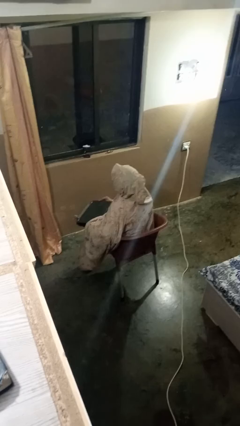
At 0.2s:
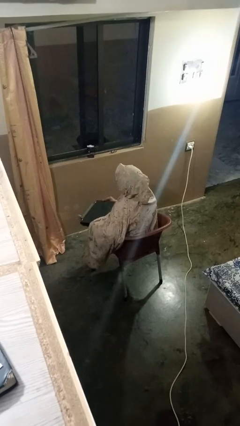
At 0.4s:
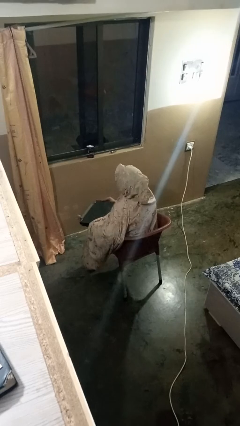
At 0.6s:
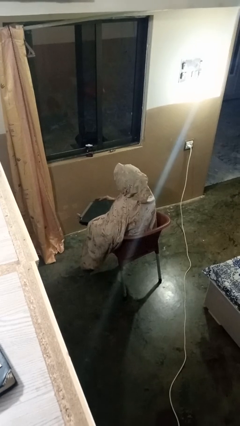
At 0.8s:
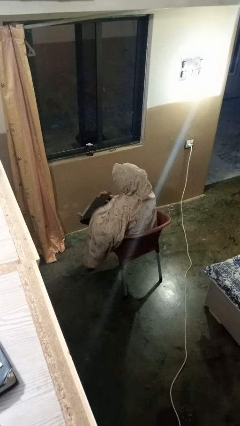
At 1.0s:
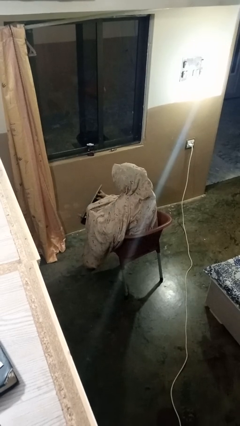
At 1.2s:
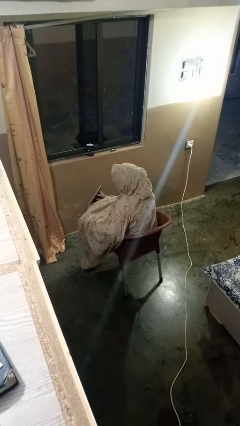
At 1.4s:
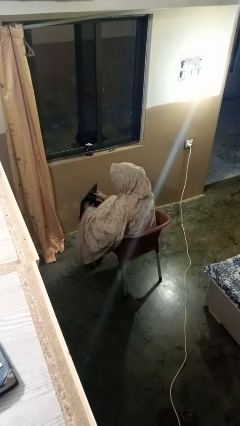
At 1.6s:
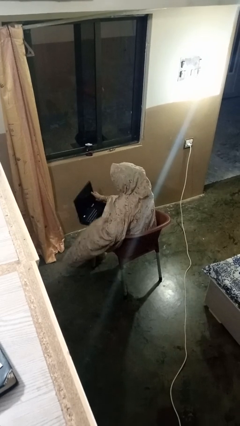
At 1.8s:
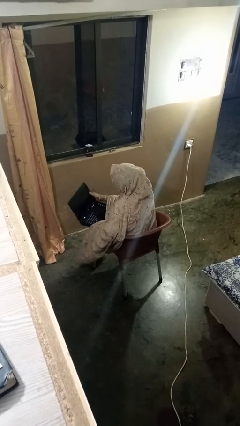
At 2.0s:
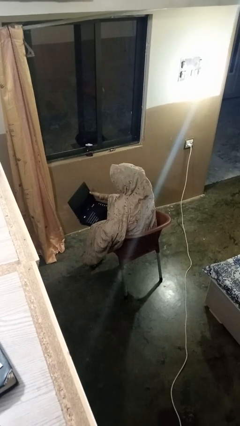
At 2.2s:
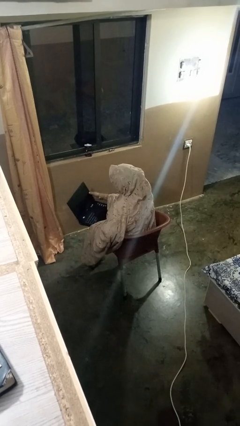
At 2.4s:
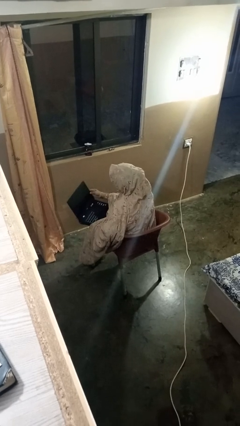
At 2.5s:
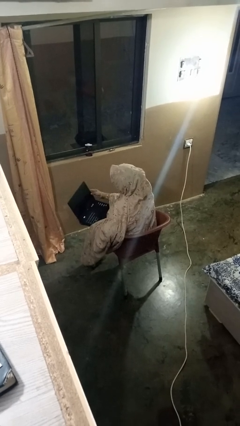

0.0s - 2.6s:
person opens laptop

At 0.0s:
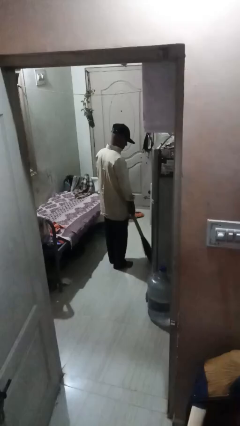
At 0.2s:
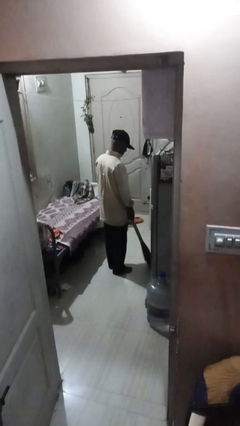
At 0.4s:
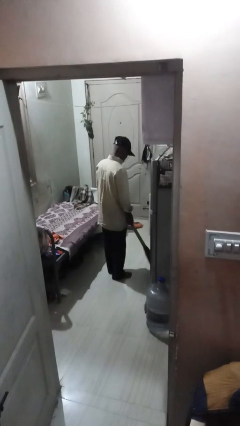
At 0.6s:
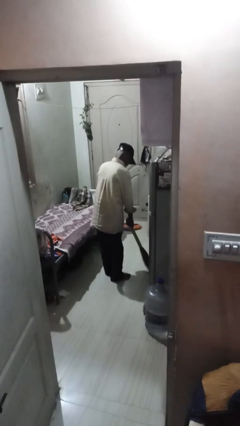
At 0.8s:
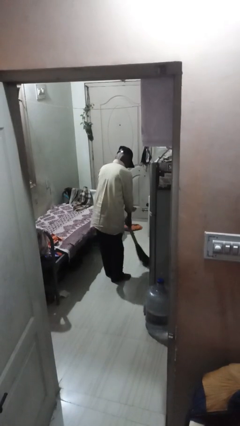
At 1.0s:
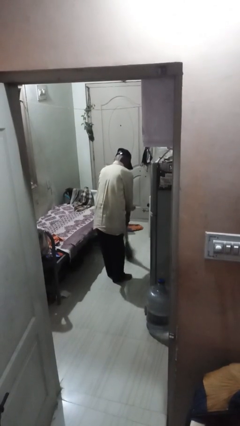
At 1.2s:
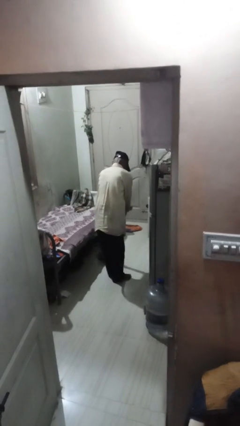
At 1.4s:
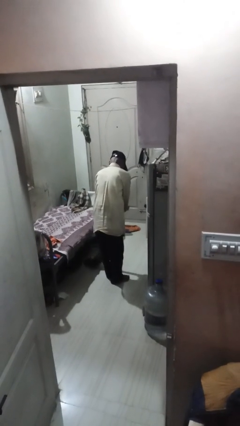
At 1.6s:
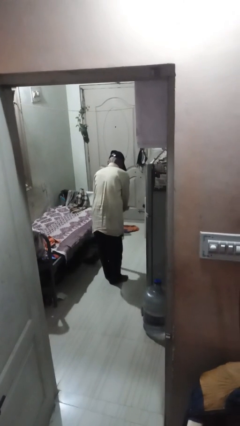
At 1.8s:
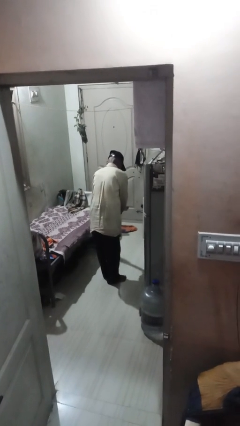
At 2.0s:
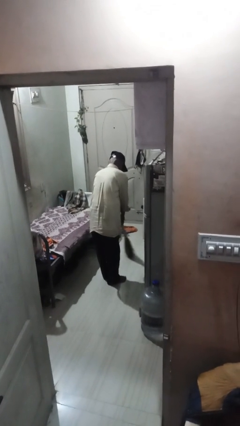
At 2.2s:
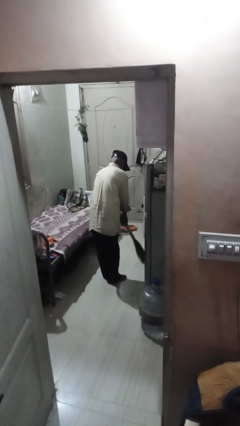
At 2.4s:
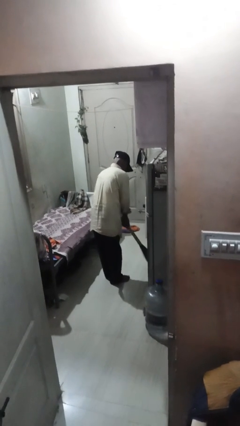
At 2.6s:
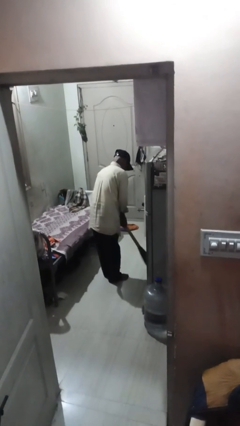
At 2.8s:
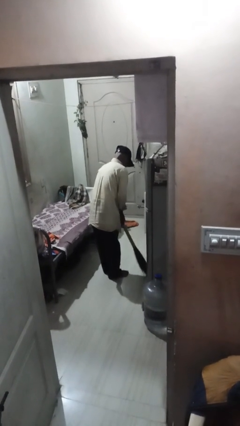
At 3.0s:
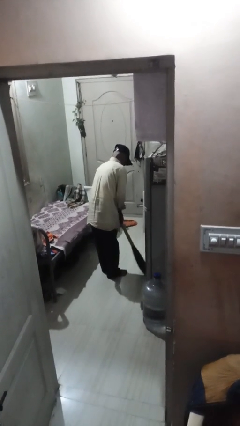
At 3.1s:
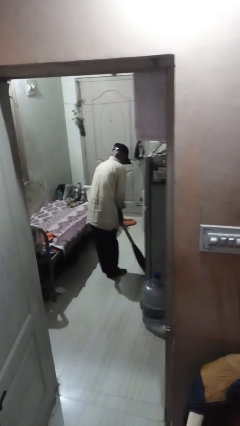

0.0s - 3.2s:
person sweeps floor

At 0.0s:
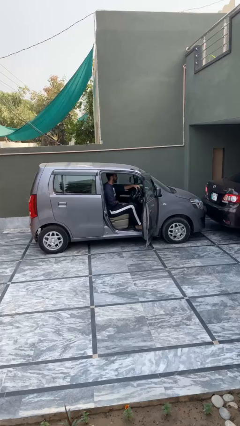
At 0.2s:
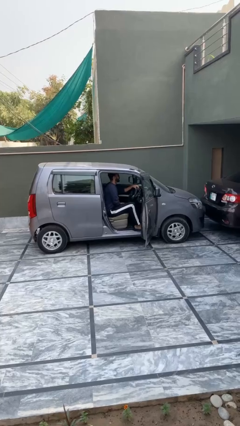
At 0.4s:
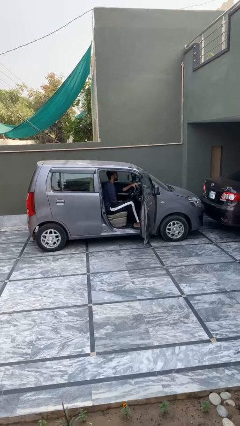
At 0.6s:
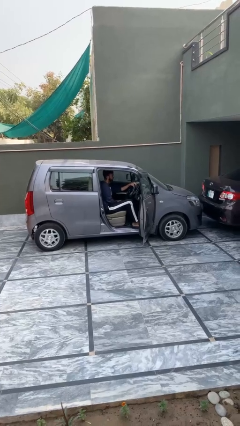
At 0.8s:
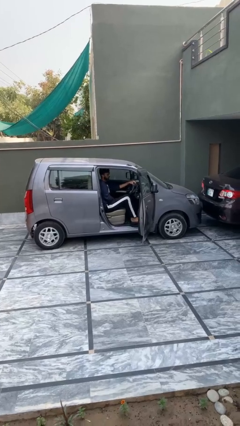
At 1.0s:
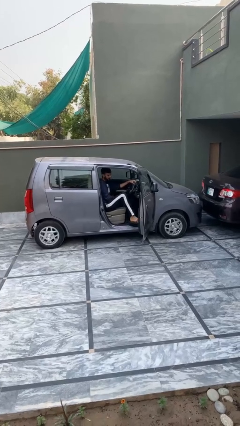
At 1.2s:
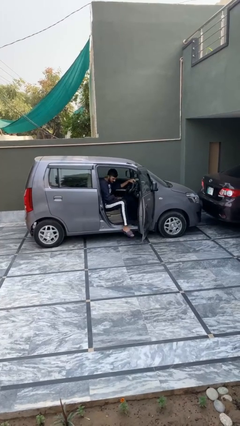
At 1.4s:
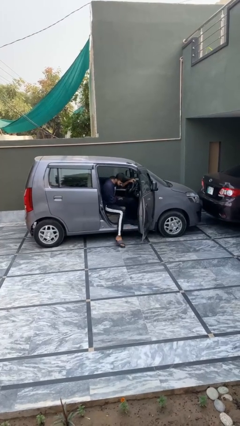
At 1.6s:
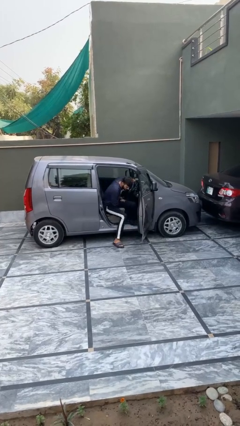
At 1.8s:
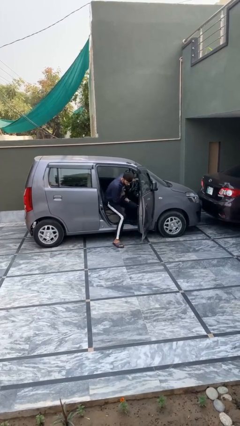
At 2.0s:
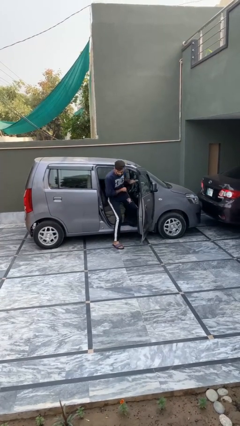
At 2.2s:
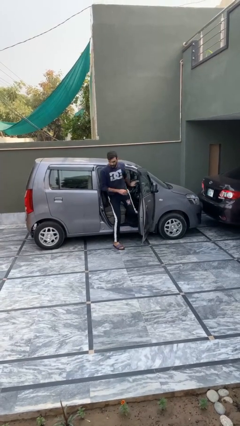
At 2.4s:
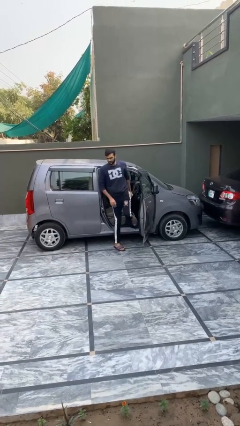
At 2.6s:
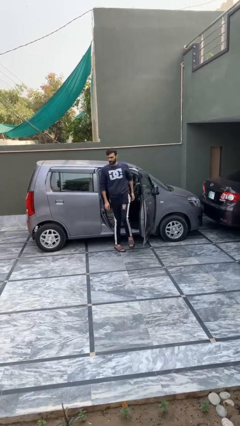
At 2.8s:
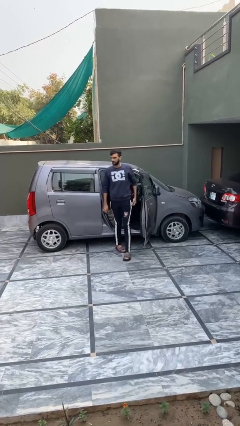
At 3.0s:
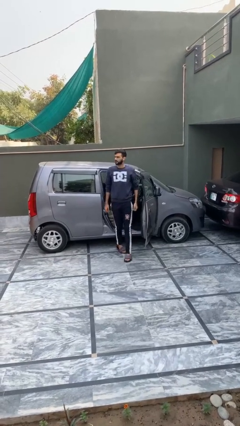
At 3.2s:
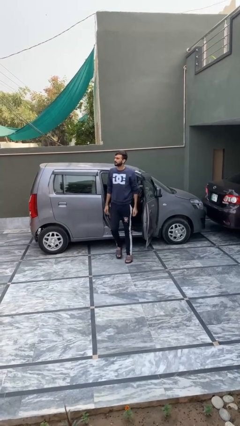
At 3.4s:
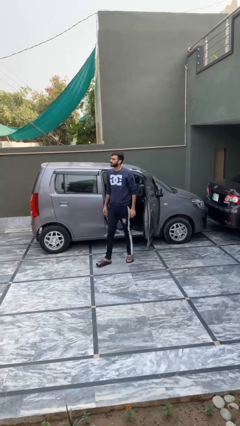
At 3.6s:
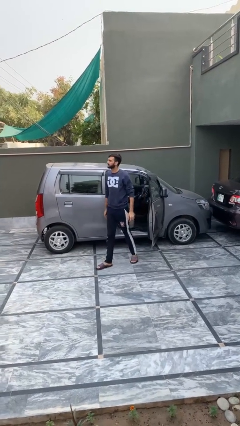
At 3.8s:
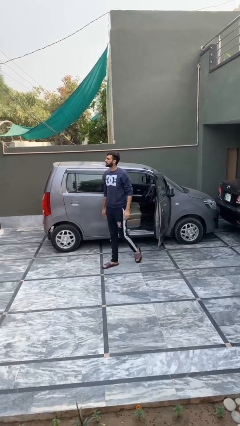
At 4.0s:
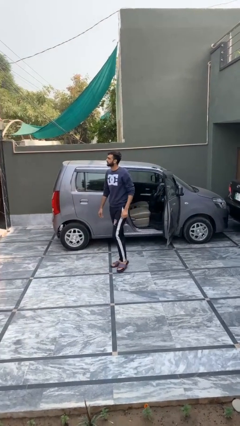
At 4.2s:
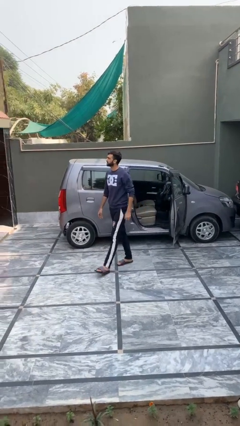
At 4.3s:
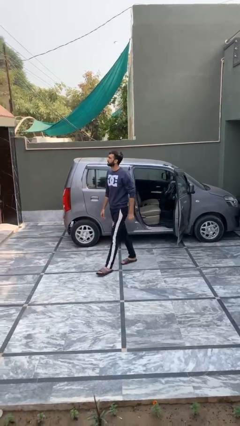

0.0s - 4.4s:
person exits car

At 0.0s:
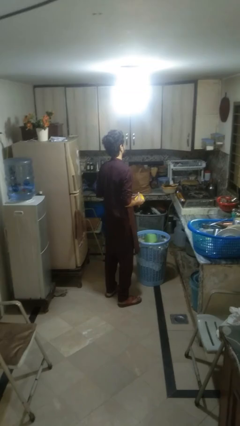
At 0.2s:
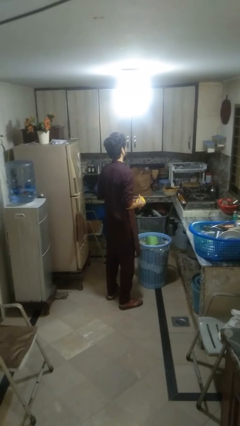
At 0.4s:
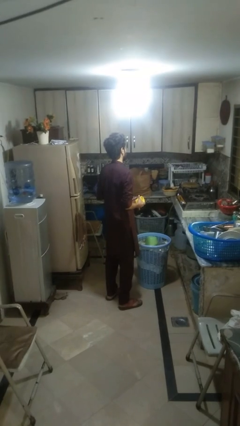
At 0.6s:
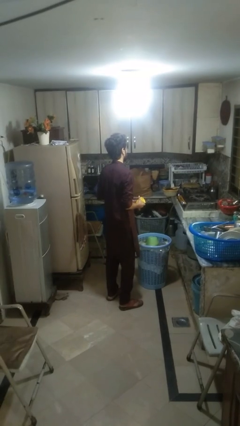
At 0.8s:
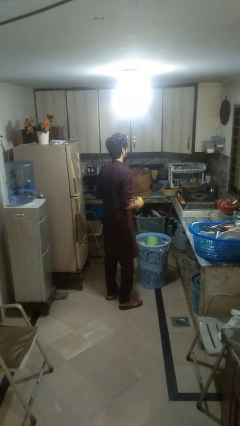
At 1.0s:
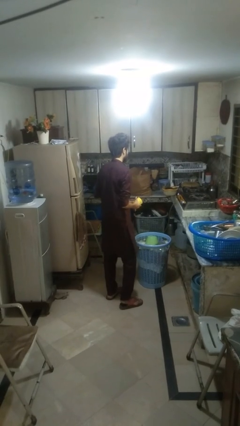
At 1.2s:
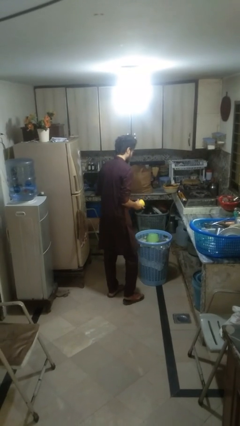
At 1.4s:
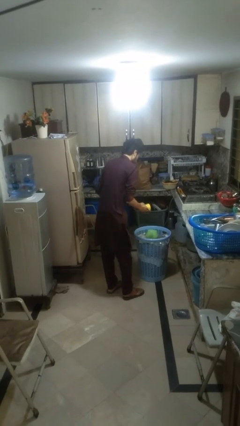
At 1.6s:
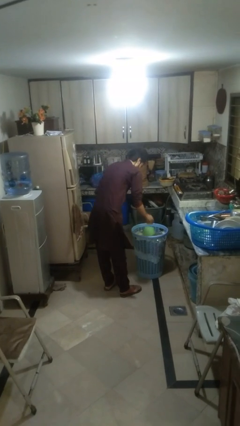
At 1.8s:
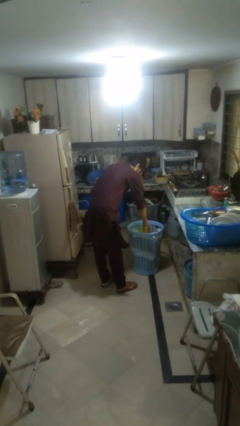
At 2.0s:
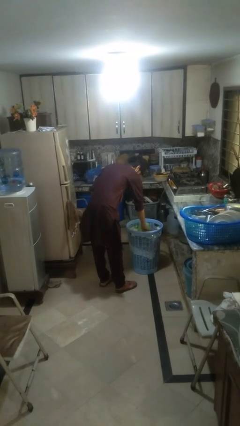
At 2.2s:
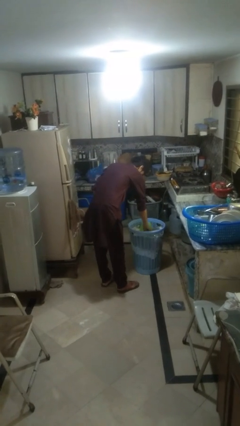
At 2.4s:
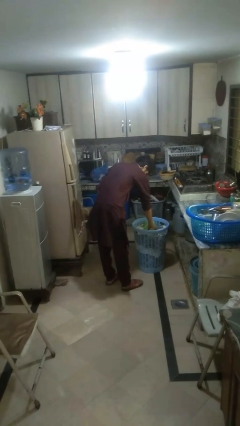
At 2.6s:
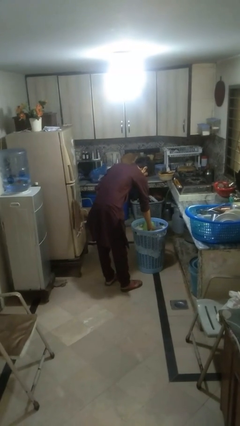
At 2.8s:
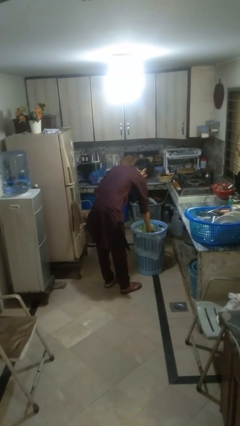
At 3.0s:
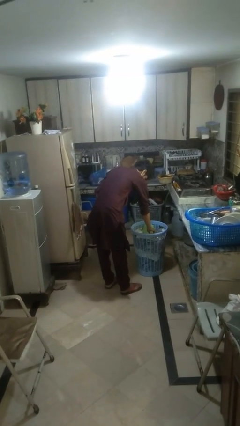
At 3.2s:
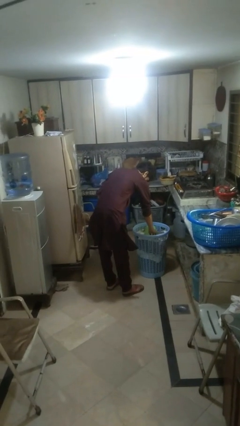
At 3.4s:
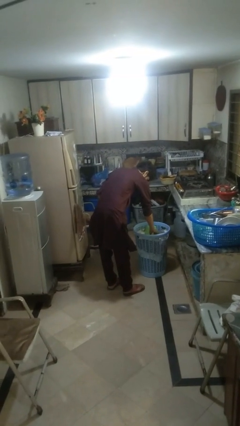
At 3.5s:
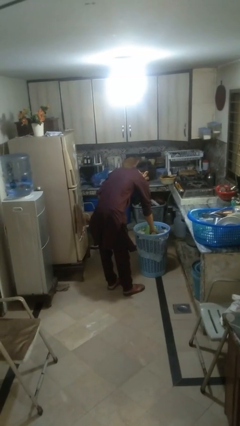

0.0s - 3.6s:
person puts object into basket

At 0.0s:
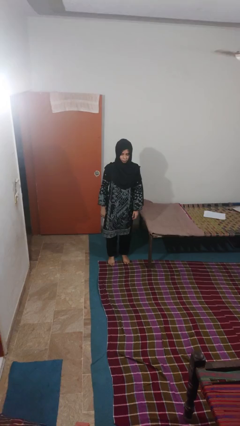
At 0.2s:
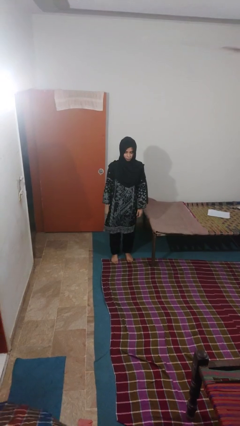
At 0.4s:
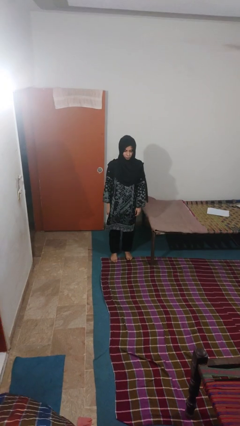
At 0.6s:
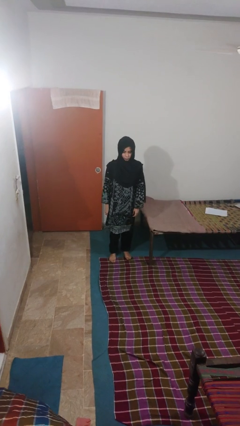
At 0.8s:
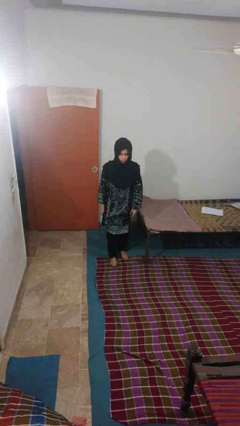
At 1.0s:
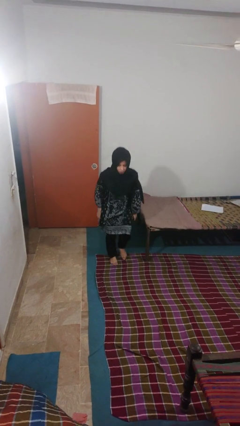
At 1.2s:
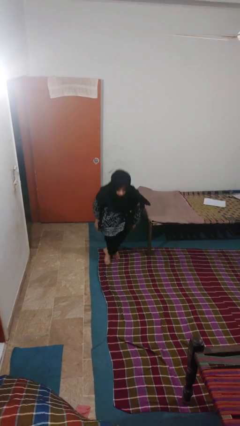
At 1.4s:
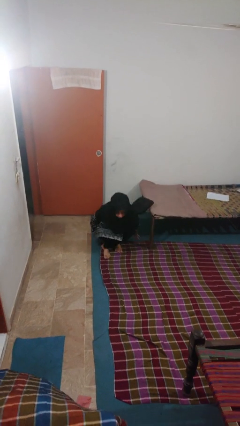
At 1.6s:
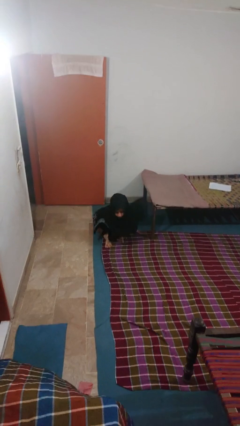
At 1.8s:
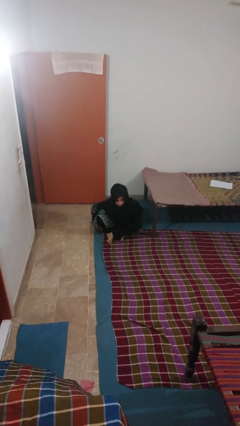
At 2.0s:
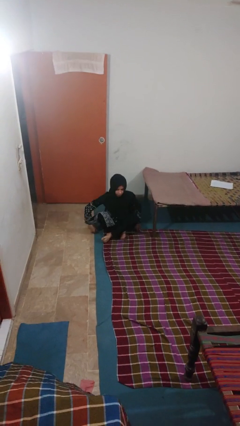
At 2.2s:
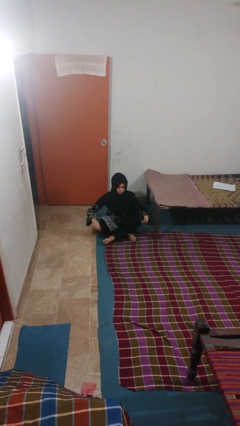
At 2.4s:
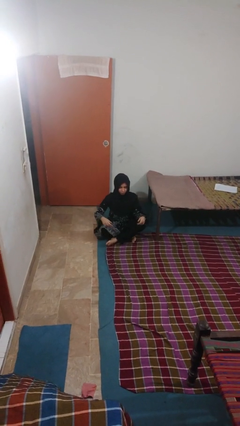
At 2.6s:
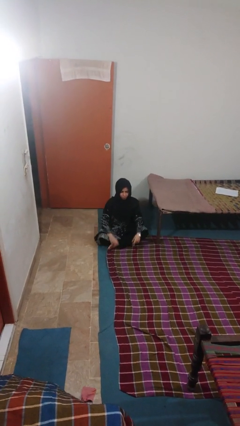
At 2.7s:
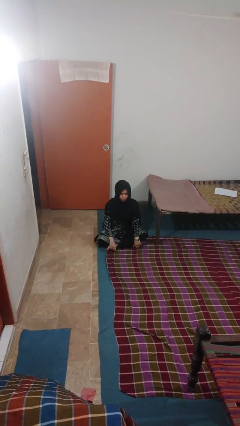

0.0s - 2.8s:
person sits crisscross

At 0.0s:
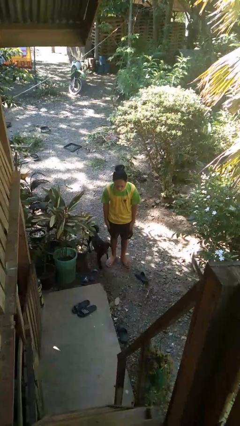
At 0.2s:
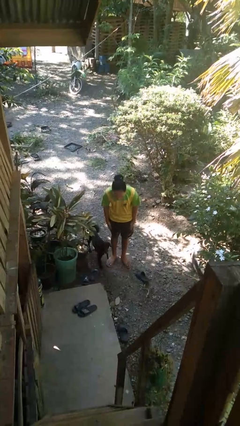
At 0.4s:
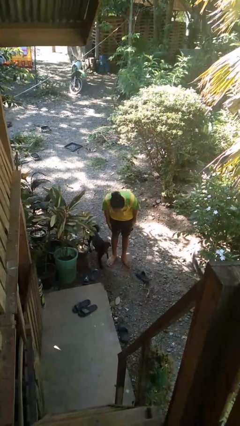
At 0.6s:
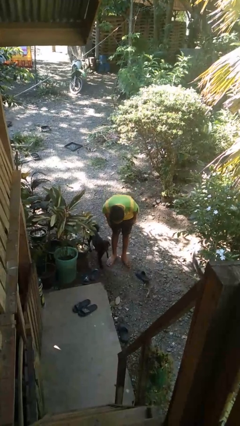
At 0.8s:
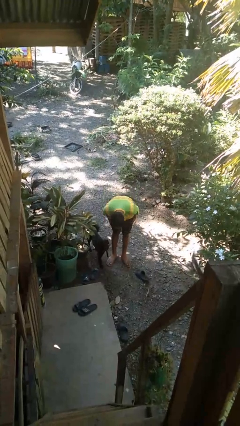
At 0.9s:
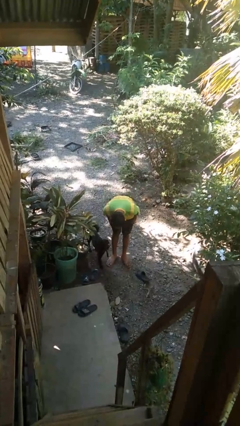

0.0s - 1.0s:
person bows
